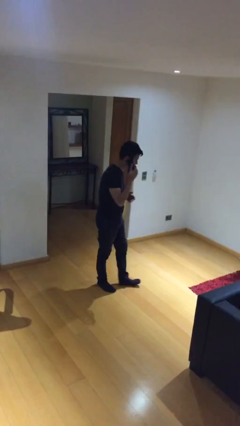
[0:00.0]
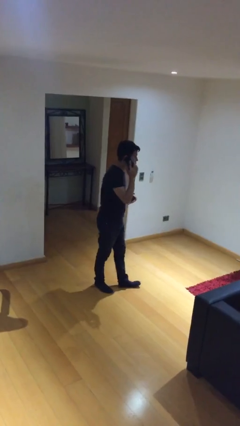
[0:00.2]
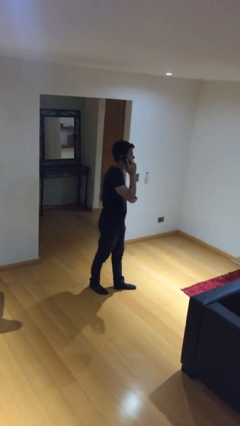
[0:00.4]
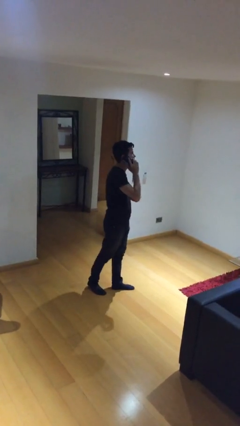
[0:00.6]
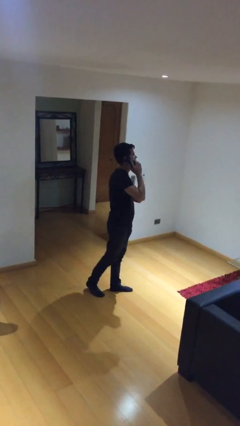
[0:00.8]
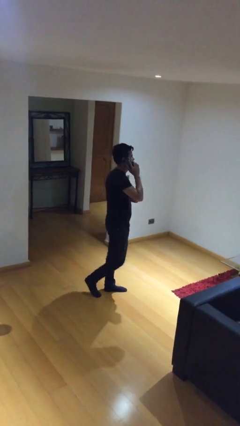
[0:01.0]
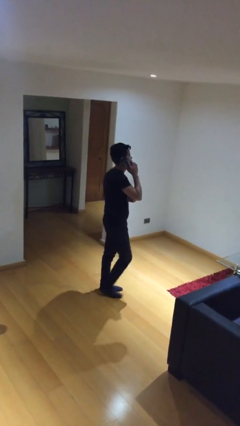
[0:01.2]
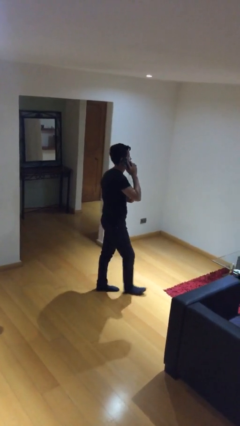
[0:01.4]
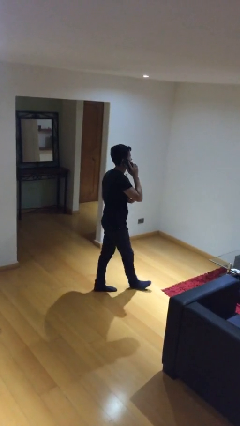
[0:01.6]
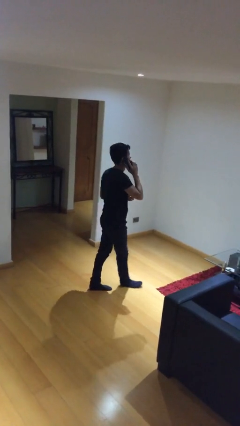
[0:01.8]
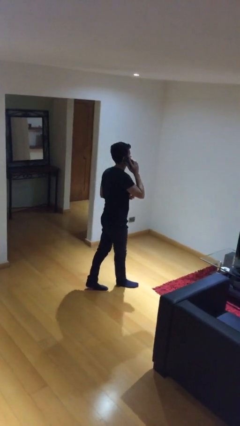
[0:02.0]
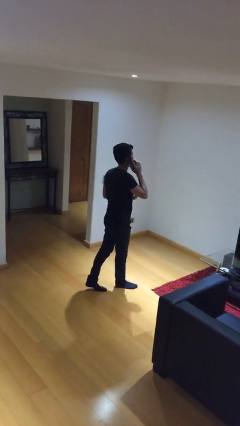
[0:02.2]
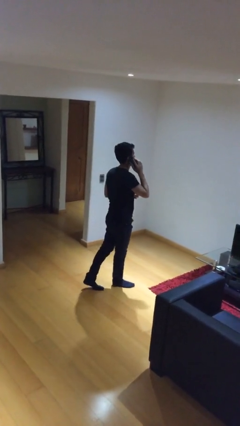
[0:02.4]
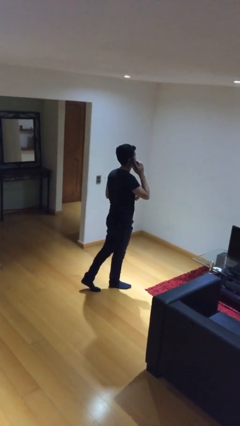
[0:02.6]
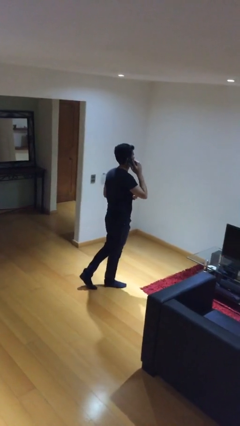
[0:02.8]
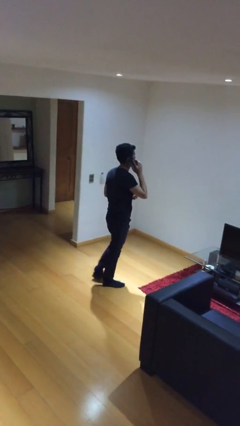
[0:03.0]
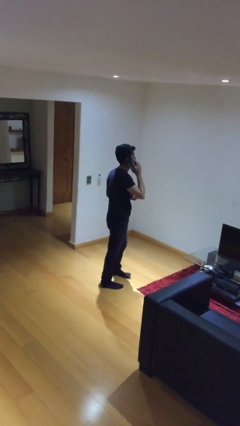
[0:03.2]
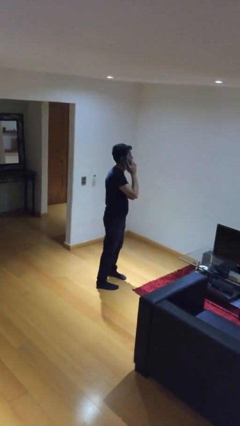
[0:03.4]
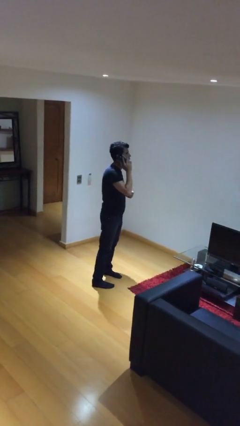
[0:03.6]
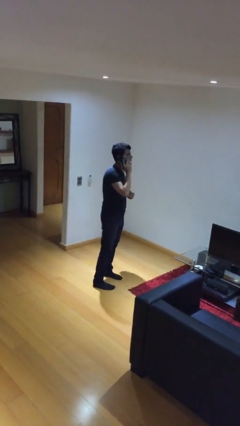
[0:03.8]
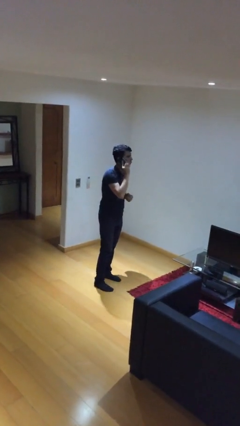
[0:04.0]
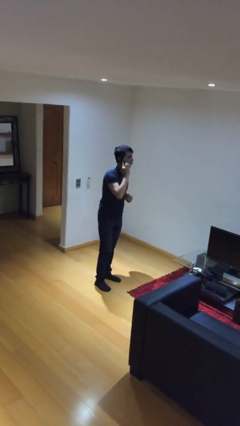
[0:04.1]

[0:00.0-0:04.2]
person talks on phone

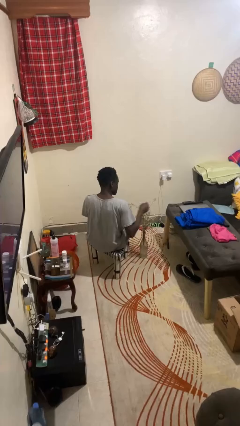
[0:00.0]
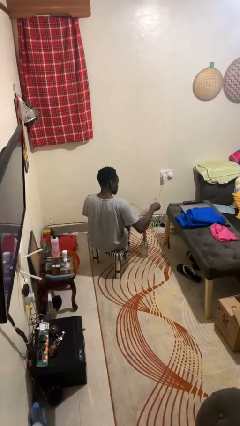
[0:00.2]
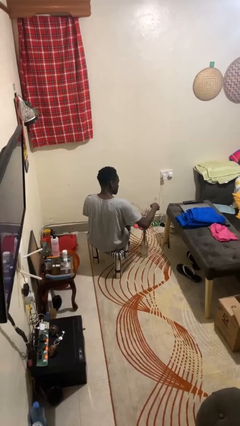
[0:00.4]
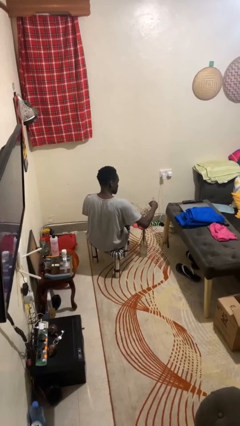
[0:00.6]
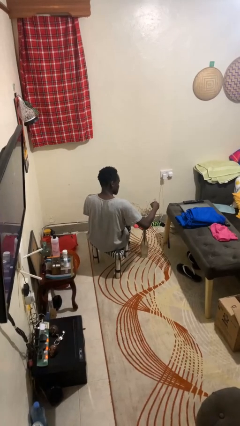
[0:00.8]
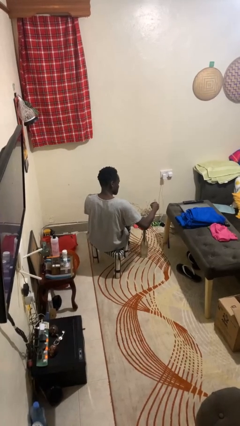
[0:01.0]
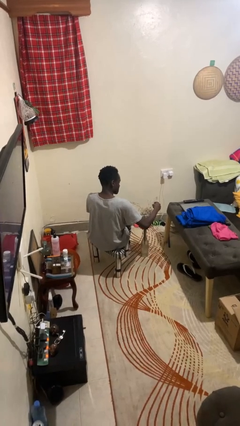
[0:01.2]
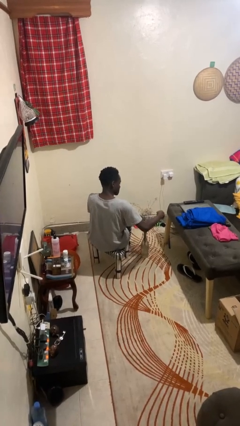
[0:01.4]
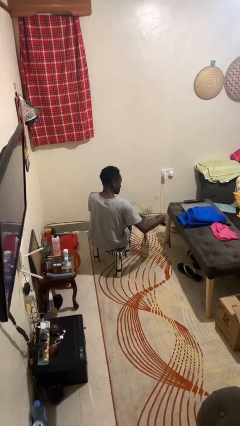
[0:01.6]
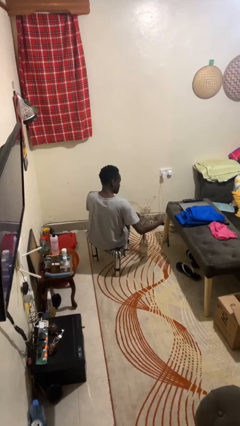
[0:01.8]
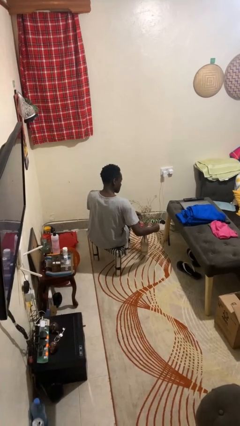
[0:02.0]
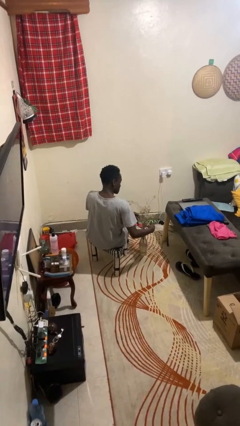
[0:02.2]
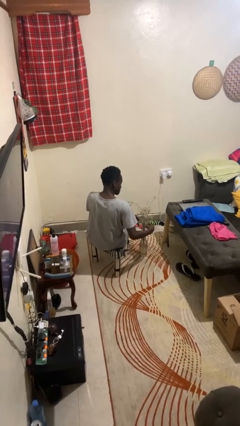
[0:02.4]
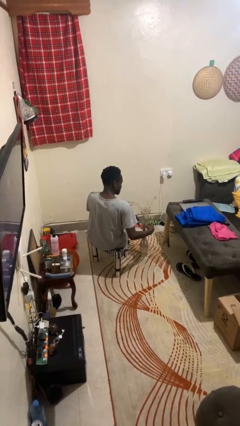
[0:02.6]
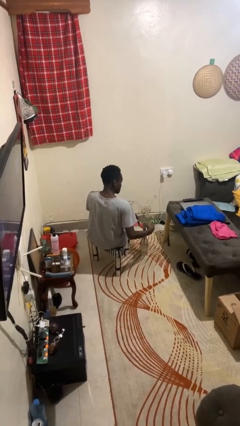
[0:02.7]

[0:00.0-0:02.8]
person arranges flowers in vase

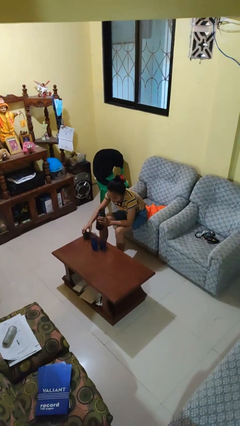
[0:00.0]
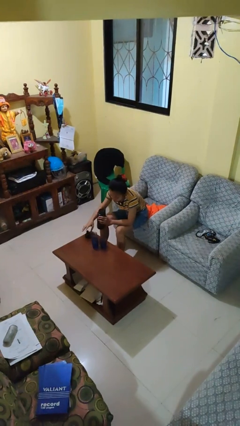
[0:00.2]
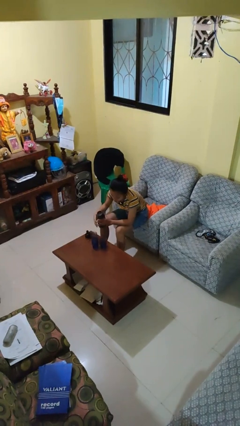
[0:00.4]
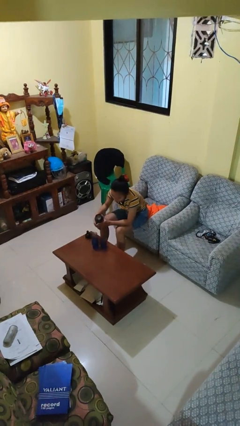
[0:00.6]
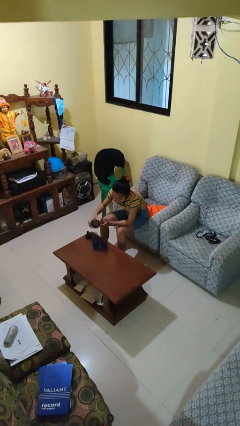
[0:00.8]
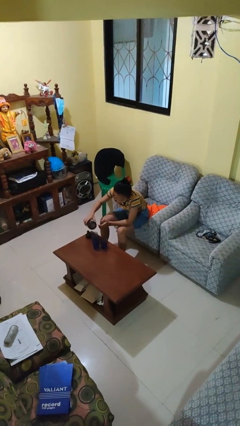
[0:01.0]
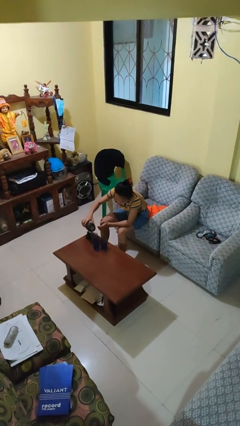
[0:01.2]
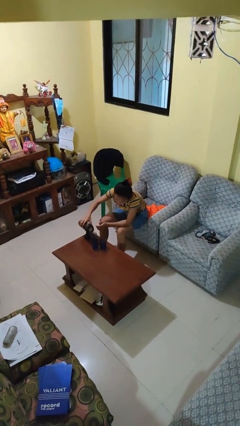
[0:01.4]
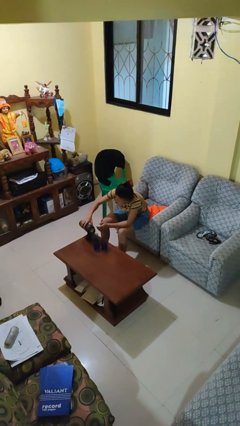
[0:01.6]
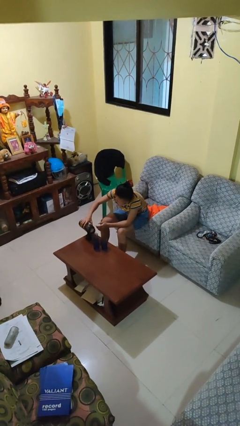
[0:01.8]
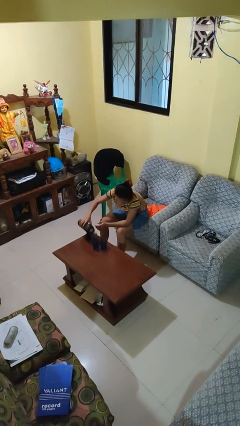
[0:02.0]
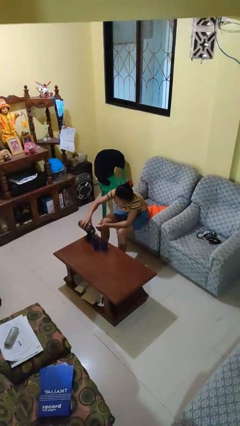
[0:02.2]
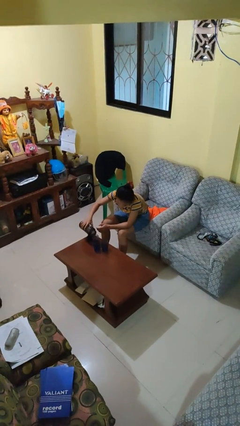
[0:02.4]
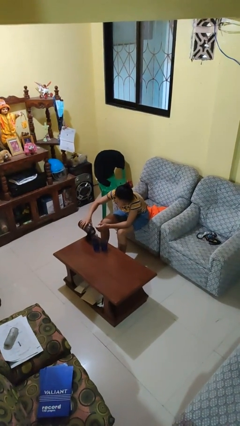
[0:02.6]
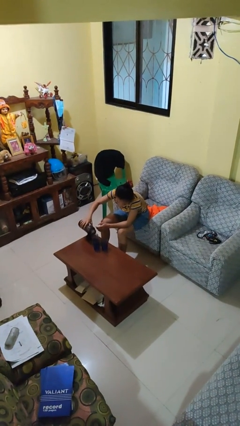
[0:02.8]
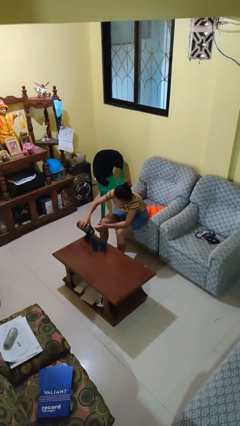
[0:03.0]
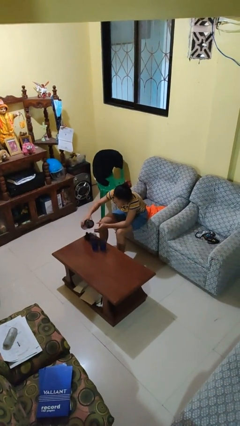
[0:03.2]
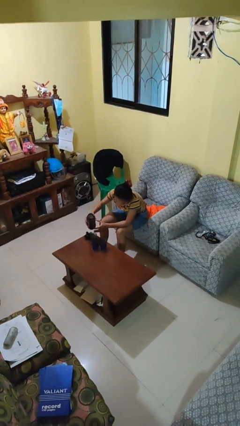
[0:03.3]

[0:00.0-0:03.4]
person pours liquid into cup

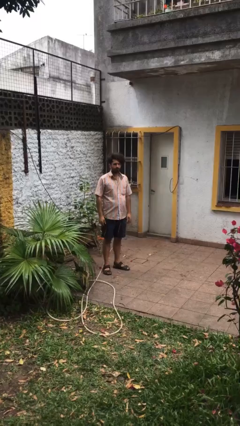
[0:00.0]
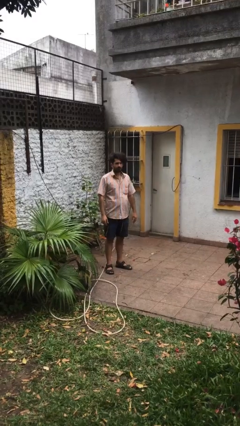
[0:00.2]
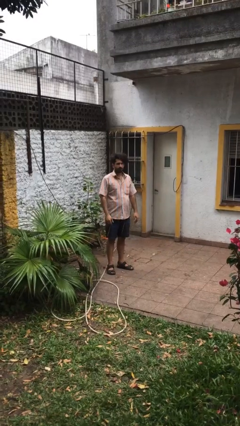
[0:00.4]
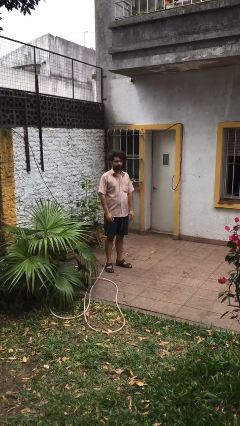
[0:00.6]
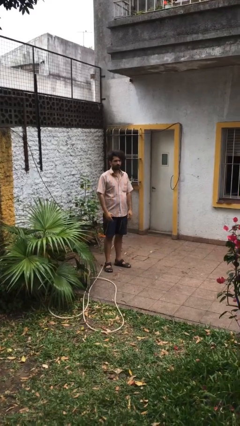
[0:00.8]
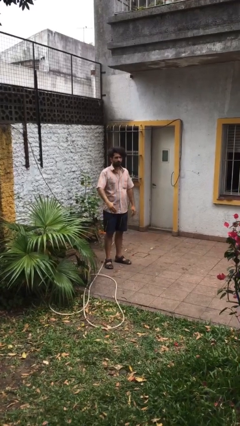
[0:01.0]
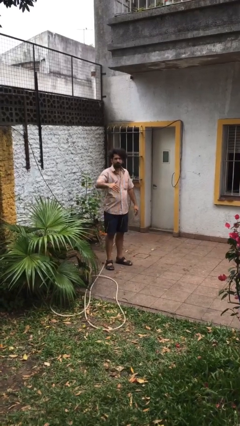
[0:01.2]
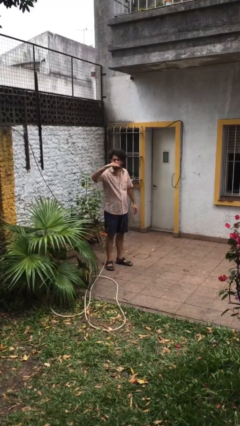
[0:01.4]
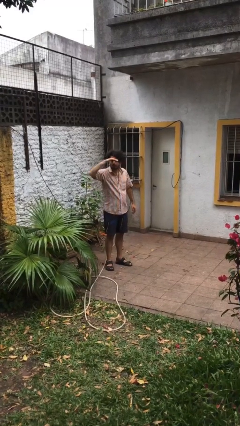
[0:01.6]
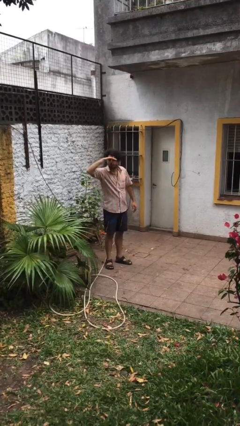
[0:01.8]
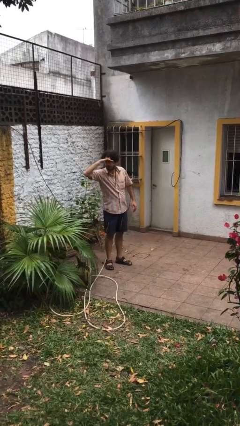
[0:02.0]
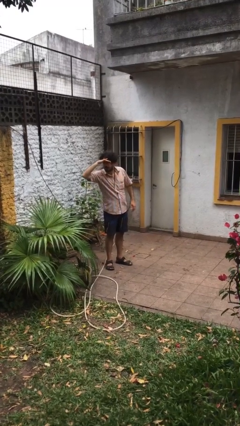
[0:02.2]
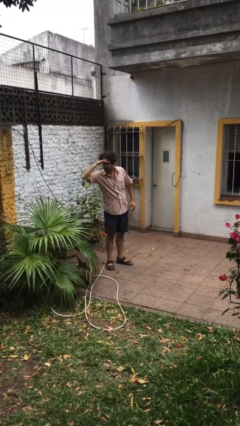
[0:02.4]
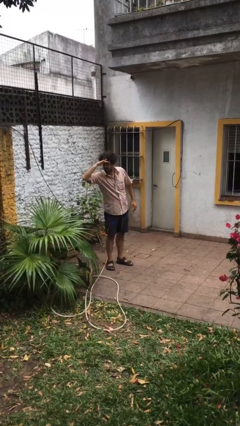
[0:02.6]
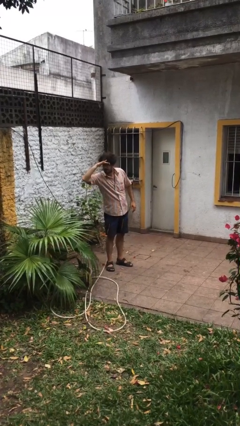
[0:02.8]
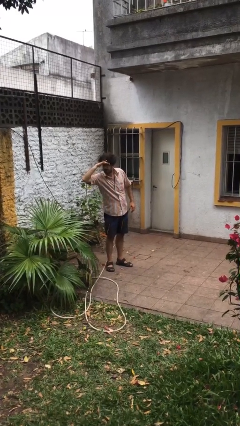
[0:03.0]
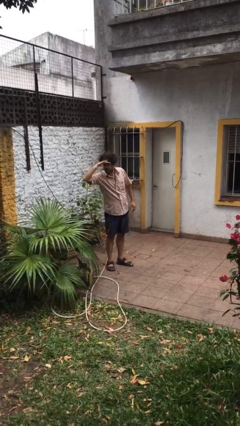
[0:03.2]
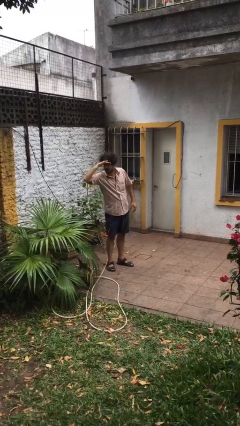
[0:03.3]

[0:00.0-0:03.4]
person shades eyes

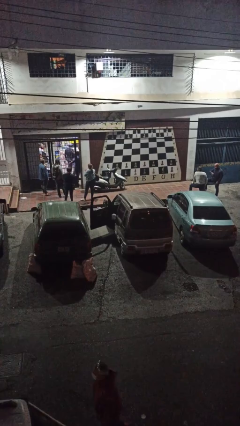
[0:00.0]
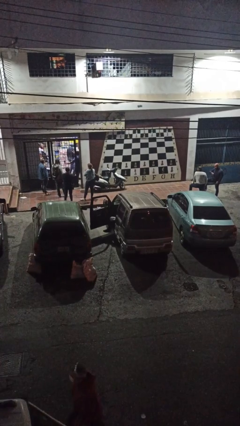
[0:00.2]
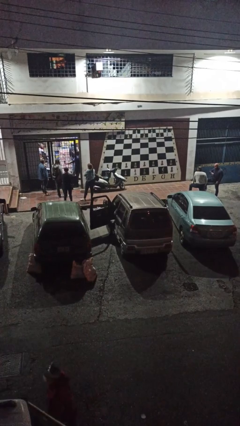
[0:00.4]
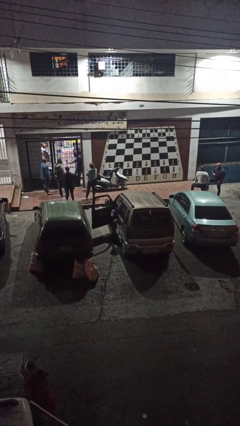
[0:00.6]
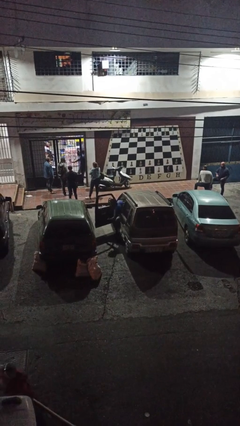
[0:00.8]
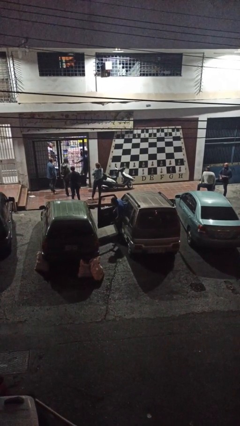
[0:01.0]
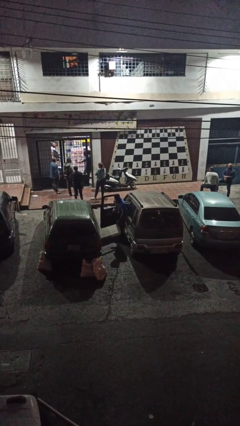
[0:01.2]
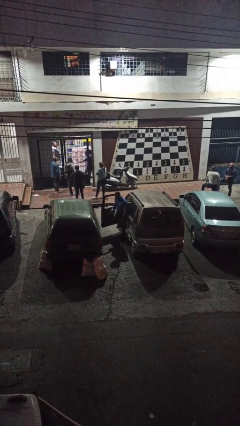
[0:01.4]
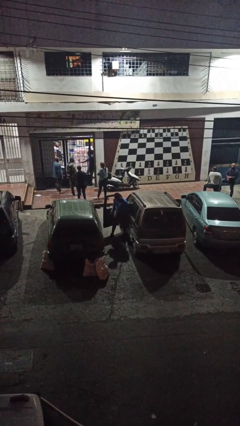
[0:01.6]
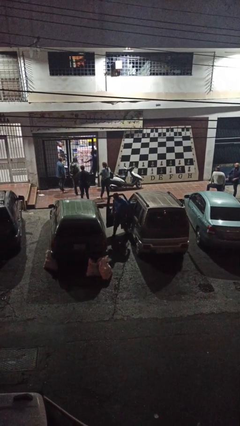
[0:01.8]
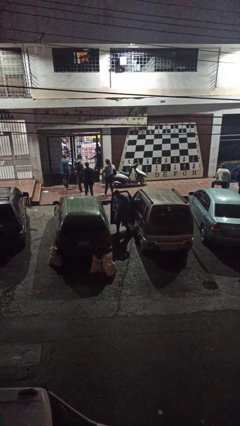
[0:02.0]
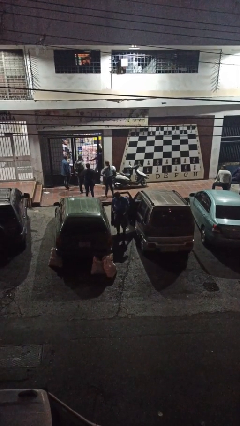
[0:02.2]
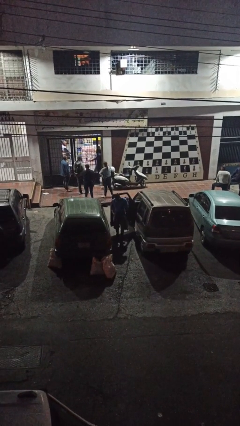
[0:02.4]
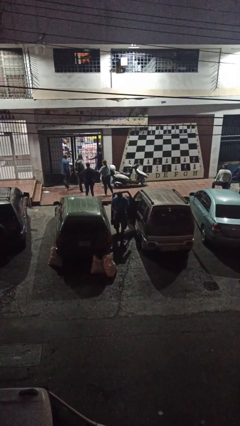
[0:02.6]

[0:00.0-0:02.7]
person exits car

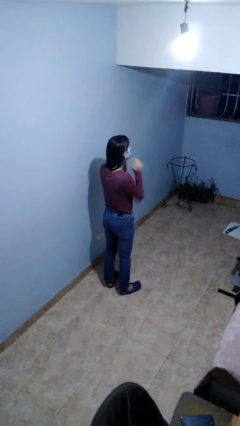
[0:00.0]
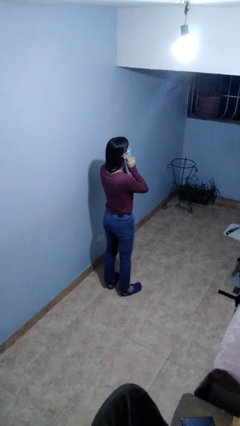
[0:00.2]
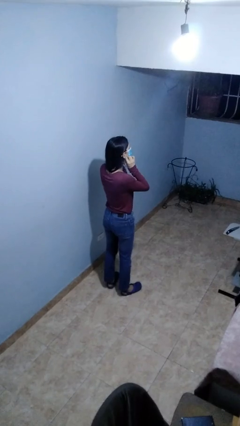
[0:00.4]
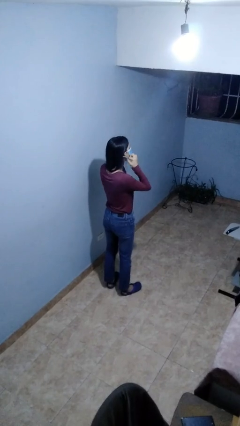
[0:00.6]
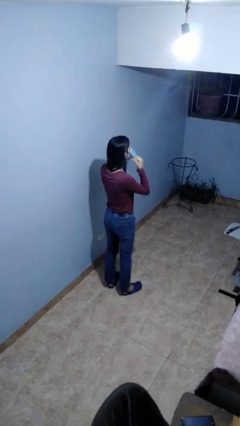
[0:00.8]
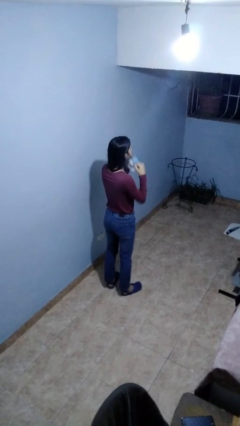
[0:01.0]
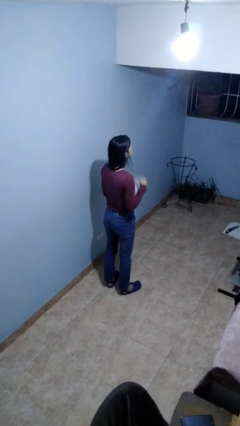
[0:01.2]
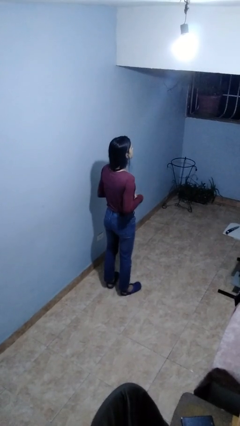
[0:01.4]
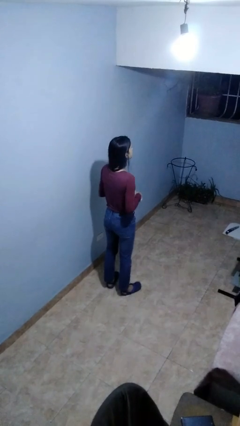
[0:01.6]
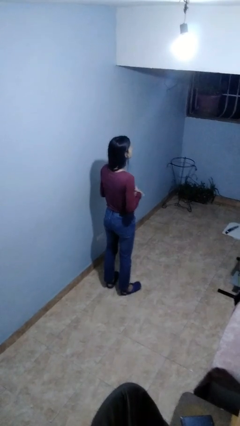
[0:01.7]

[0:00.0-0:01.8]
person takes off facemask
